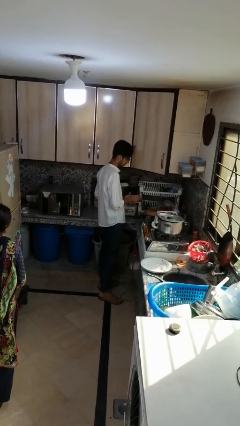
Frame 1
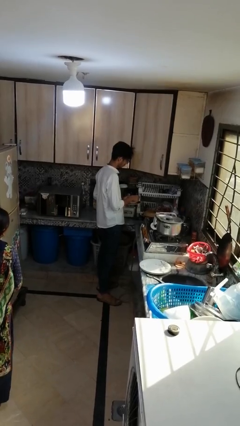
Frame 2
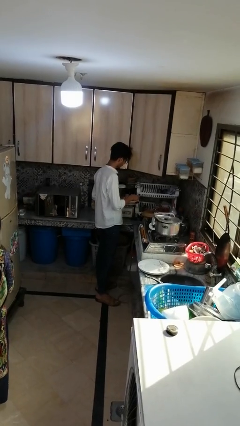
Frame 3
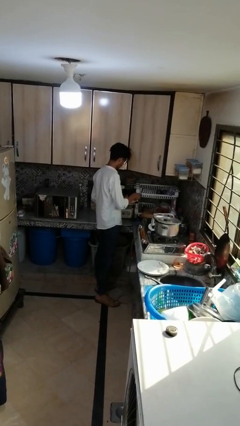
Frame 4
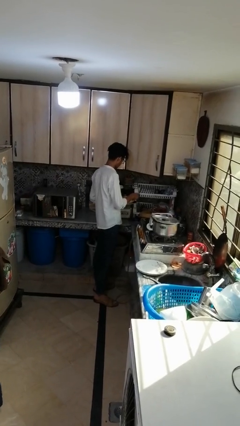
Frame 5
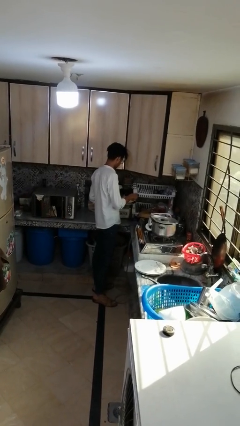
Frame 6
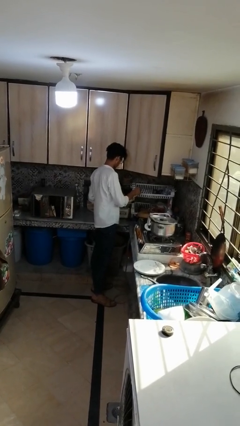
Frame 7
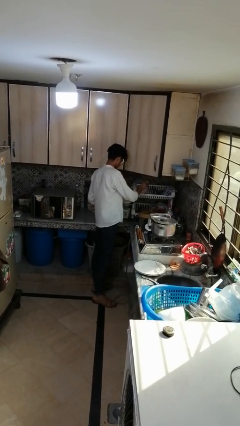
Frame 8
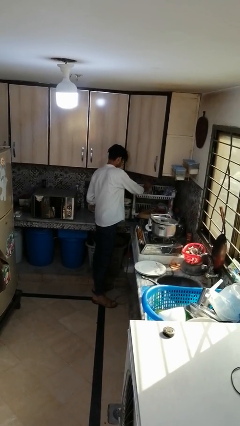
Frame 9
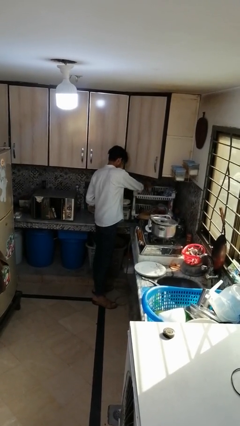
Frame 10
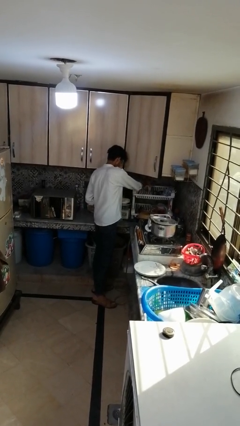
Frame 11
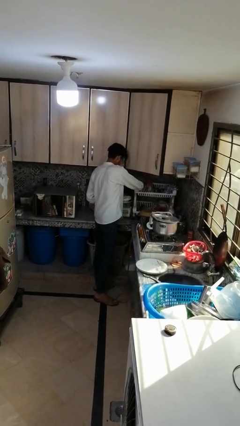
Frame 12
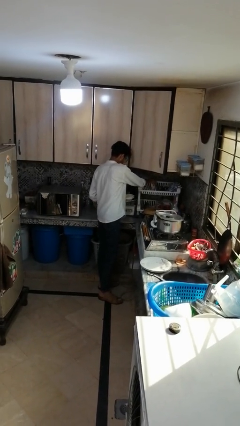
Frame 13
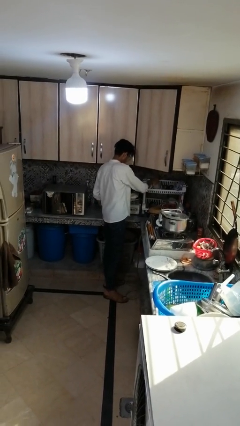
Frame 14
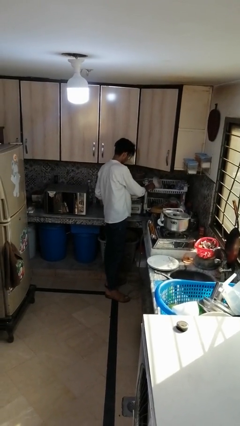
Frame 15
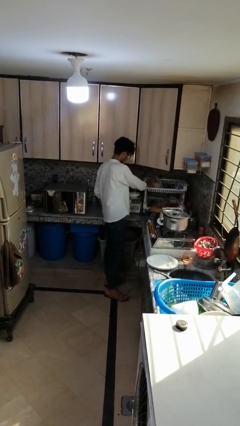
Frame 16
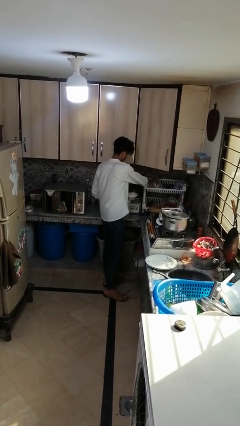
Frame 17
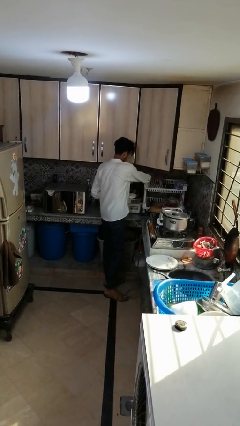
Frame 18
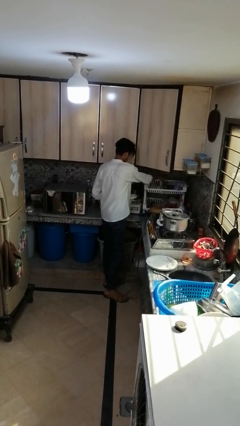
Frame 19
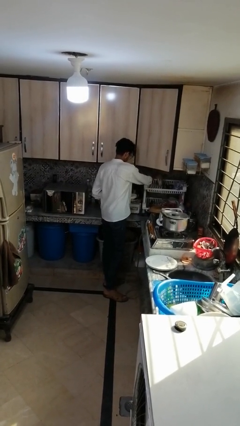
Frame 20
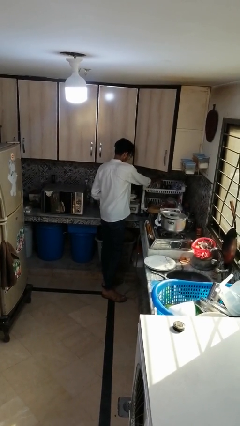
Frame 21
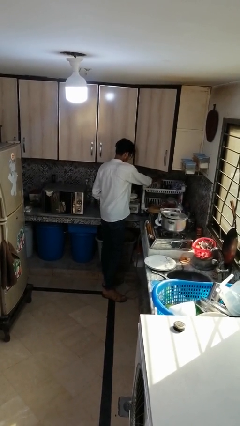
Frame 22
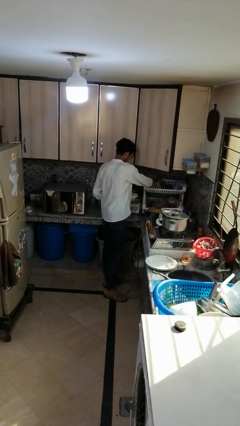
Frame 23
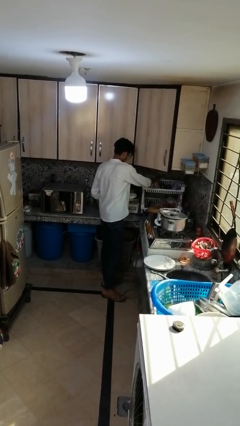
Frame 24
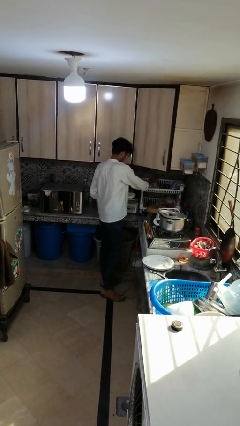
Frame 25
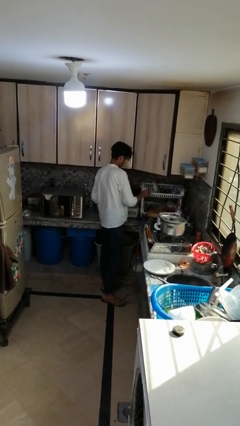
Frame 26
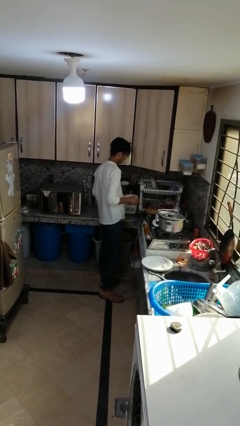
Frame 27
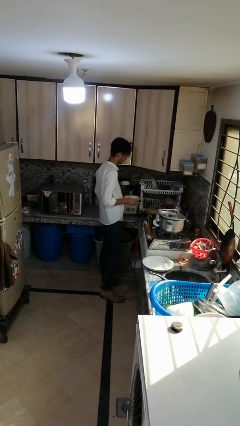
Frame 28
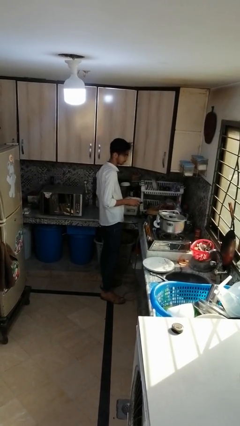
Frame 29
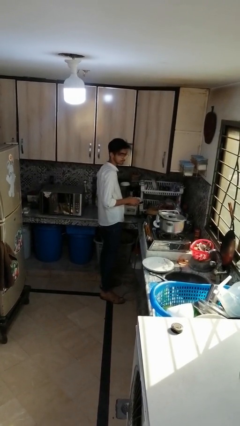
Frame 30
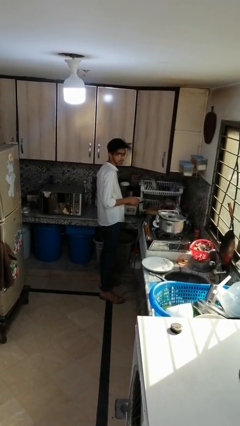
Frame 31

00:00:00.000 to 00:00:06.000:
person loads dishwasher

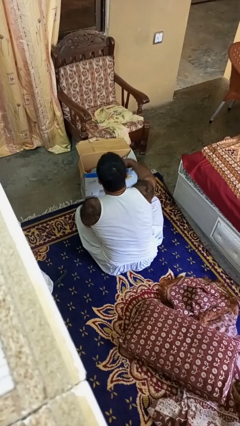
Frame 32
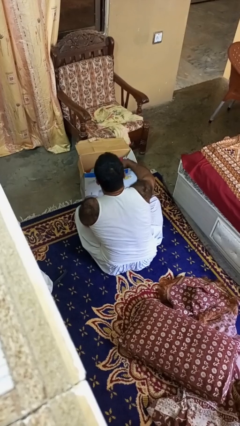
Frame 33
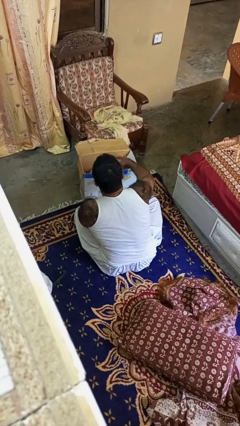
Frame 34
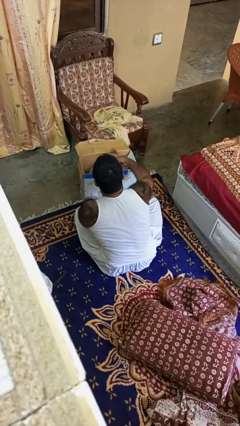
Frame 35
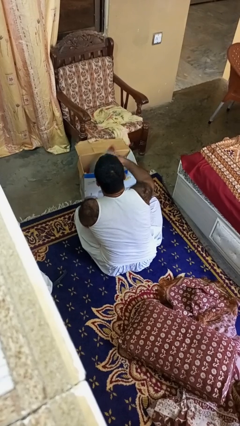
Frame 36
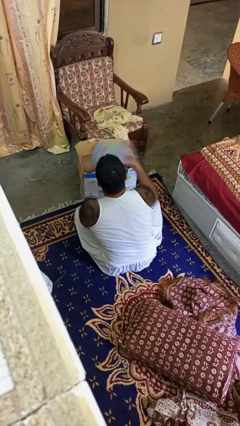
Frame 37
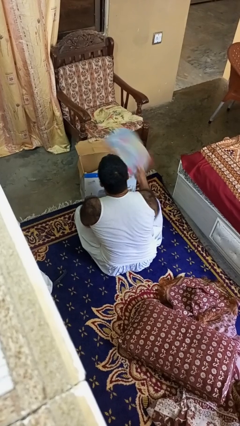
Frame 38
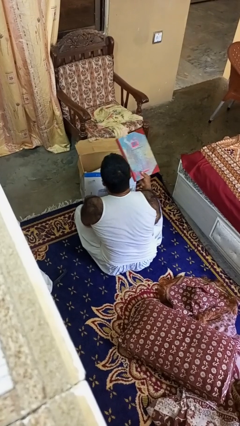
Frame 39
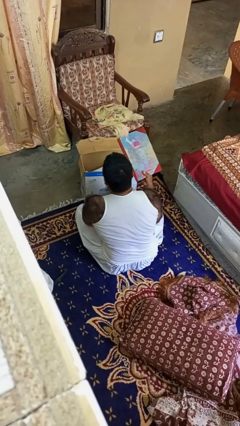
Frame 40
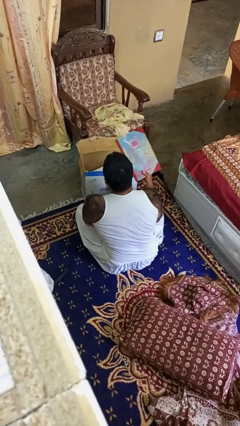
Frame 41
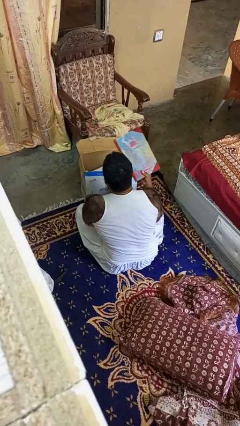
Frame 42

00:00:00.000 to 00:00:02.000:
person takes object from box

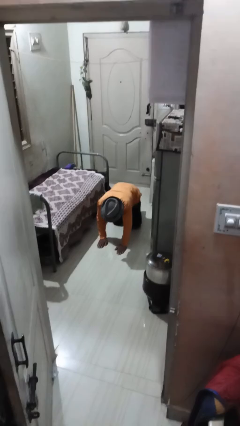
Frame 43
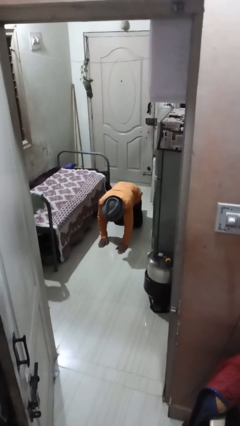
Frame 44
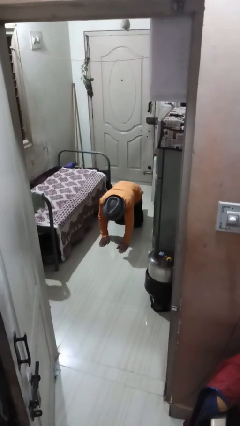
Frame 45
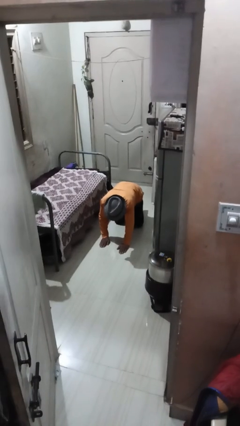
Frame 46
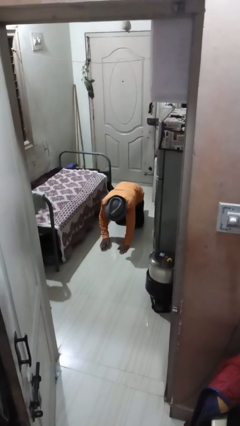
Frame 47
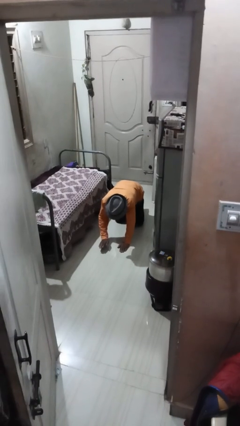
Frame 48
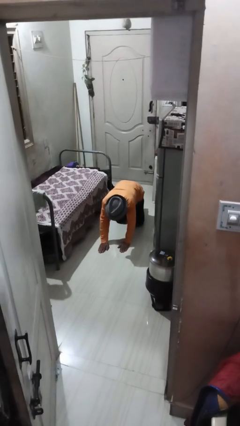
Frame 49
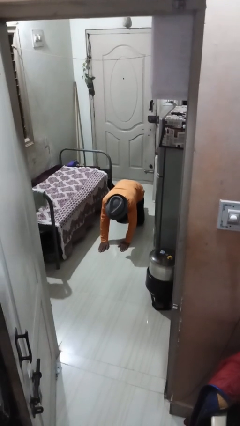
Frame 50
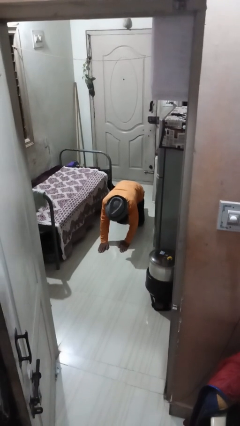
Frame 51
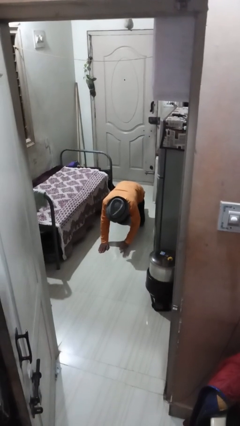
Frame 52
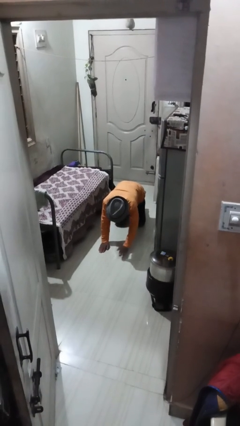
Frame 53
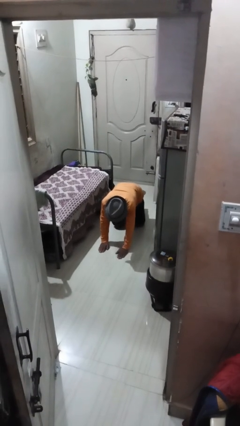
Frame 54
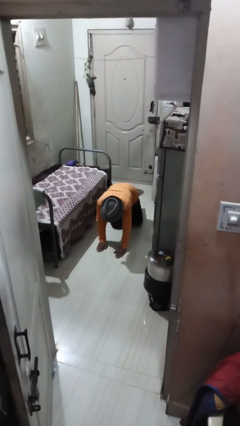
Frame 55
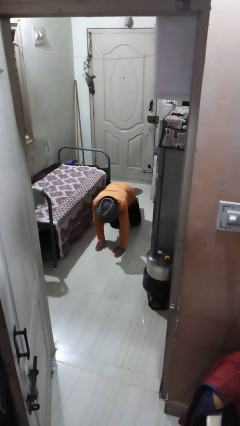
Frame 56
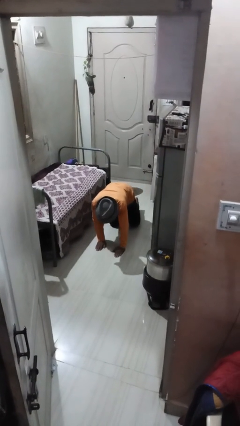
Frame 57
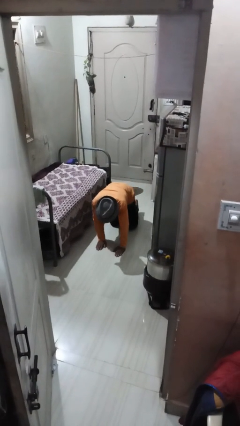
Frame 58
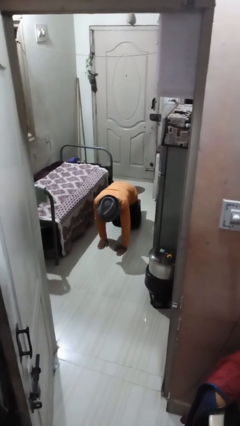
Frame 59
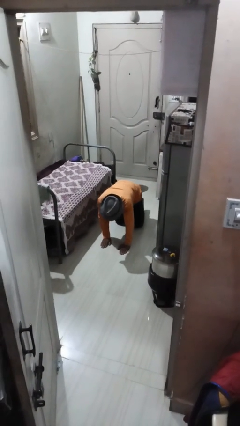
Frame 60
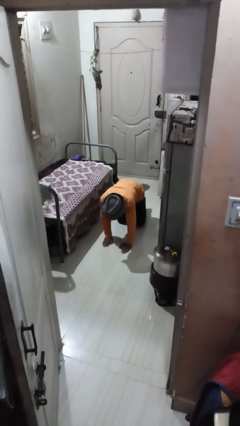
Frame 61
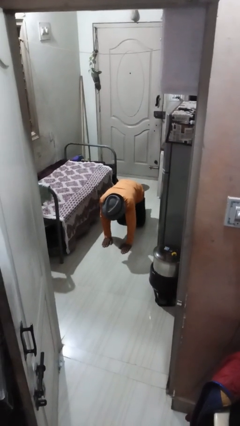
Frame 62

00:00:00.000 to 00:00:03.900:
person crawls

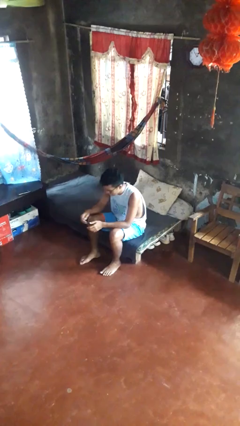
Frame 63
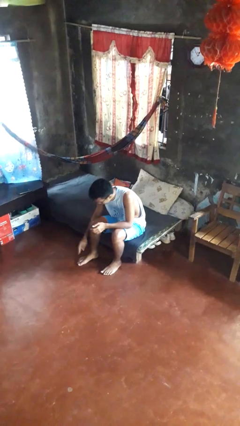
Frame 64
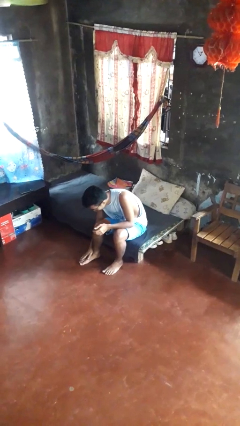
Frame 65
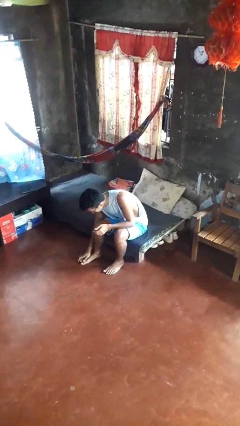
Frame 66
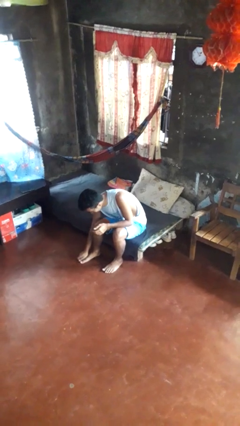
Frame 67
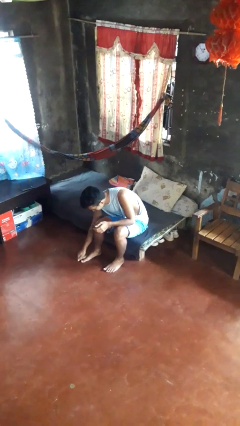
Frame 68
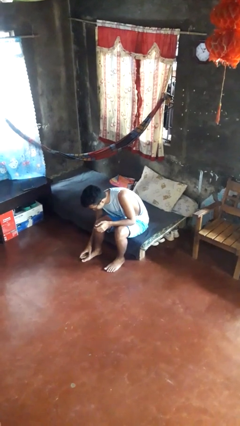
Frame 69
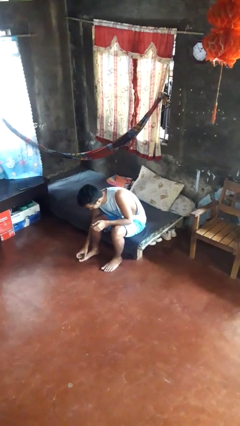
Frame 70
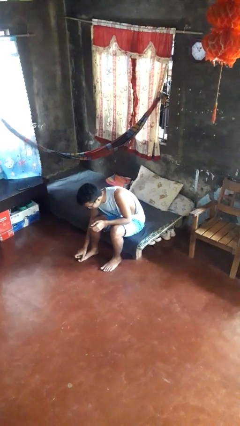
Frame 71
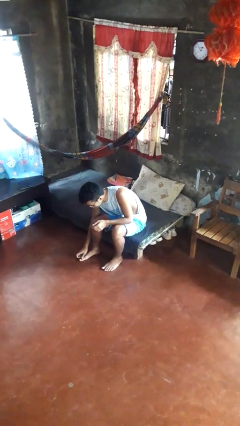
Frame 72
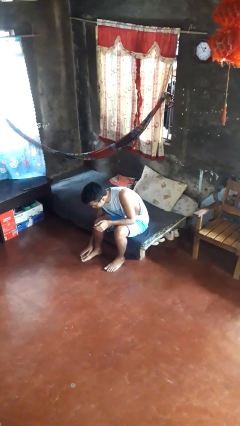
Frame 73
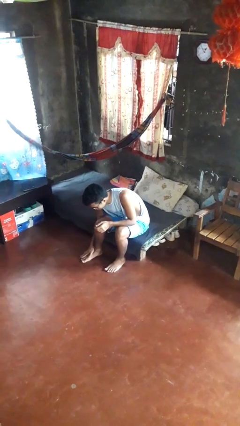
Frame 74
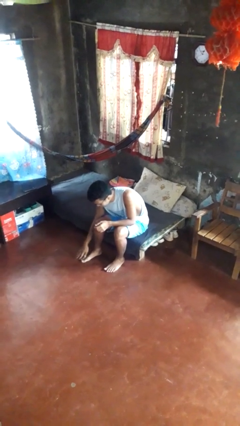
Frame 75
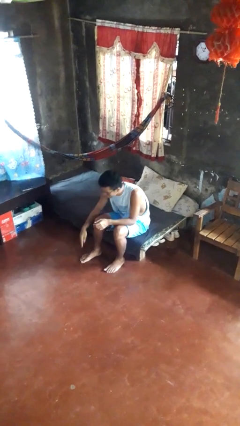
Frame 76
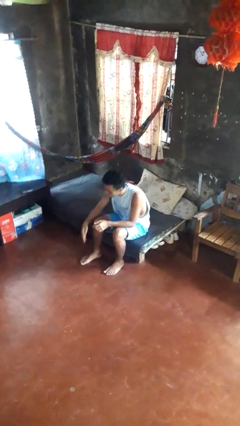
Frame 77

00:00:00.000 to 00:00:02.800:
person rubs foot

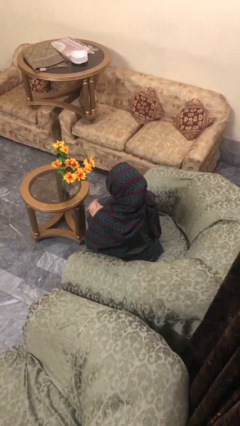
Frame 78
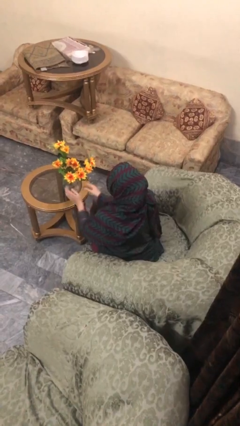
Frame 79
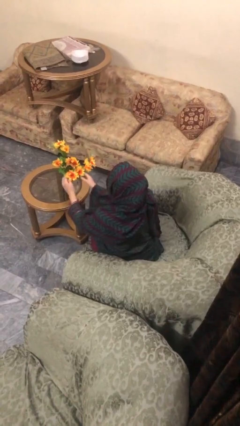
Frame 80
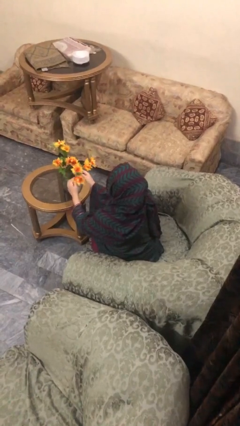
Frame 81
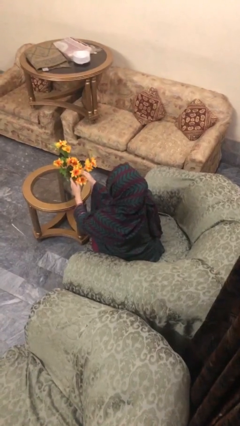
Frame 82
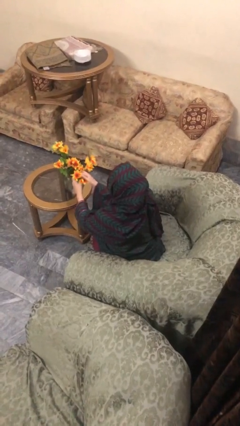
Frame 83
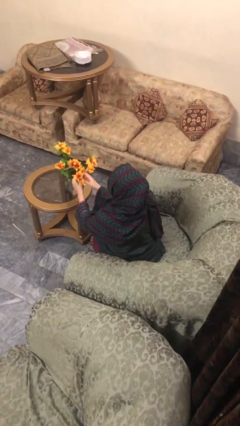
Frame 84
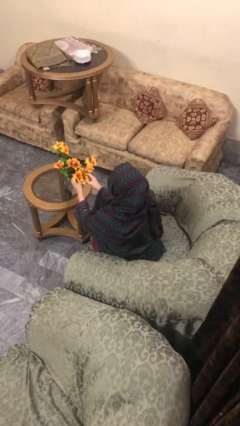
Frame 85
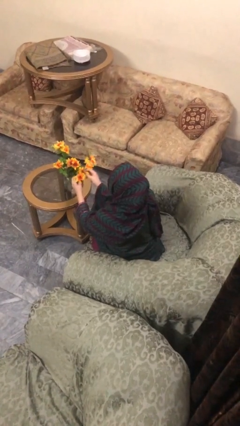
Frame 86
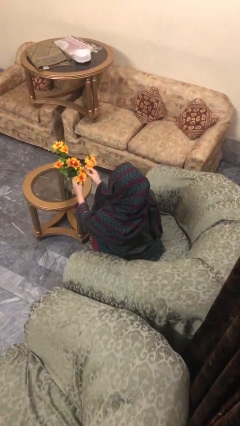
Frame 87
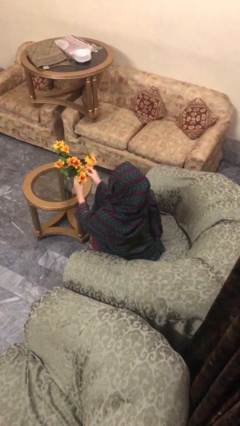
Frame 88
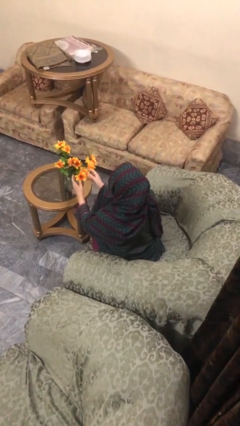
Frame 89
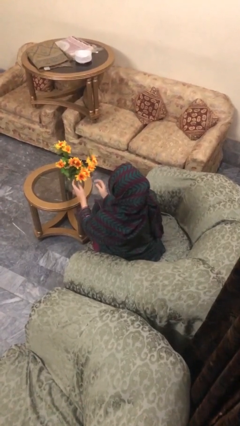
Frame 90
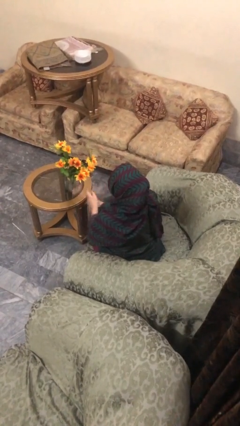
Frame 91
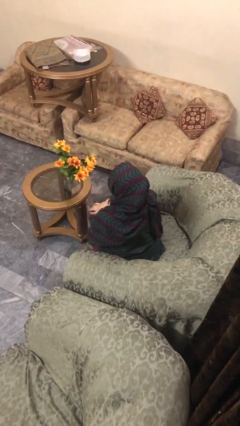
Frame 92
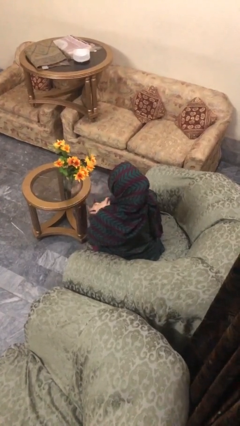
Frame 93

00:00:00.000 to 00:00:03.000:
person arranges flowers in vase
